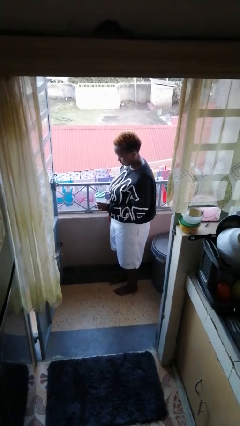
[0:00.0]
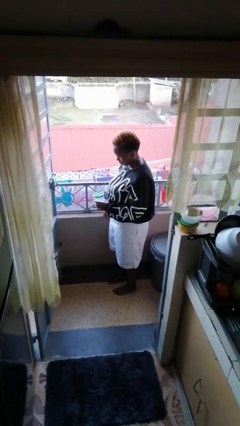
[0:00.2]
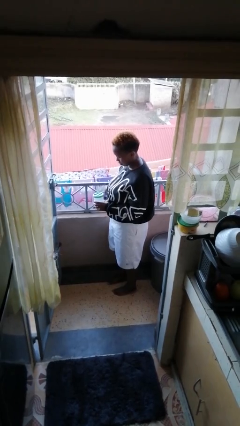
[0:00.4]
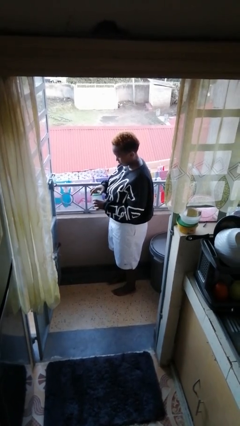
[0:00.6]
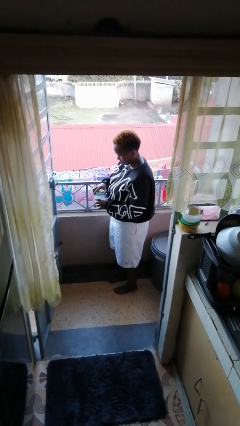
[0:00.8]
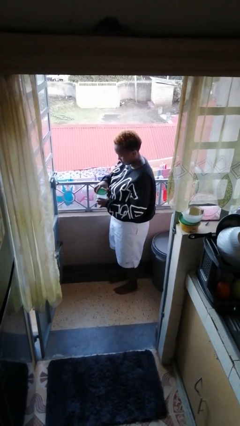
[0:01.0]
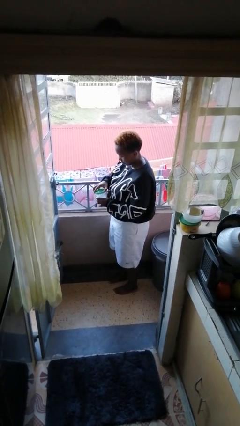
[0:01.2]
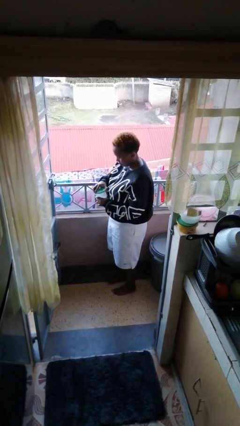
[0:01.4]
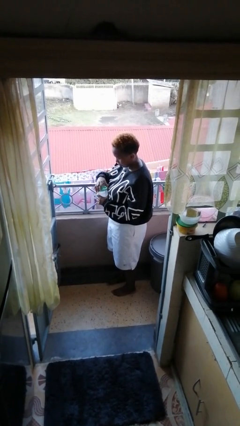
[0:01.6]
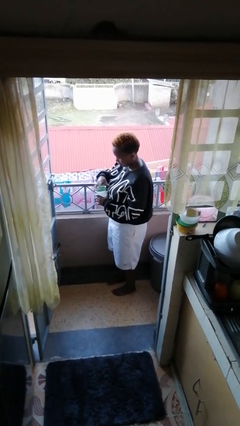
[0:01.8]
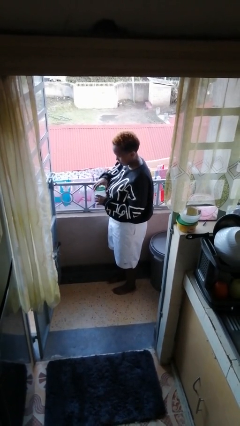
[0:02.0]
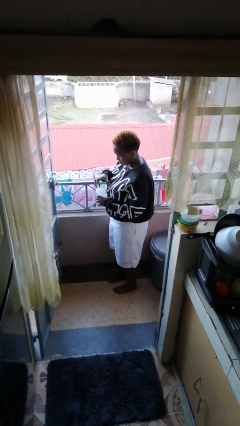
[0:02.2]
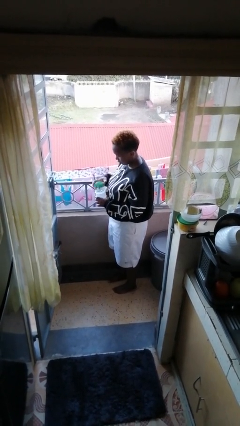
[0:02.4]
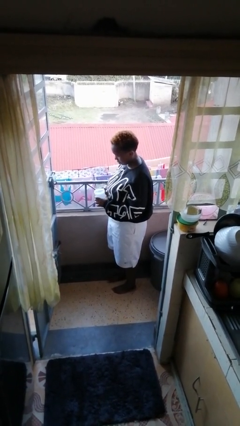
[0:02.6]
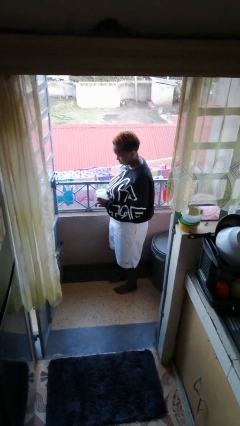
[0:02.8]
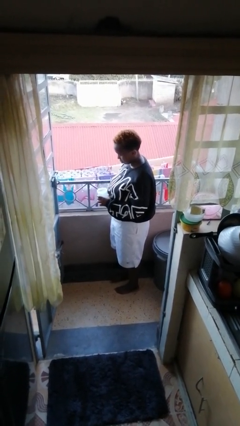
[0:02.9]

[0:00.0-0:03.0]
person opens jar

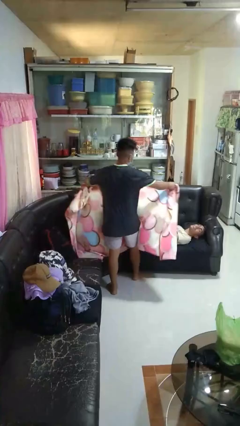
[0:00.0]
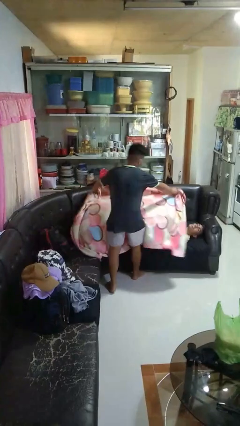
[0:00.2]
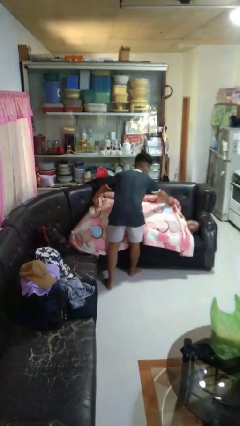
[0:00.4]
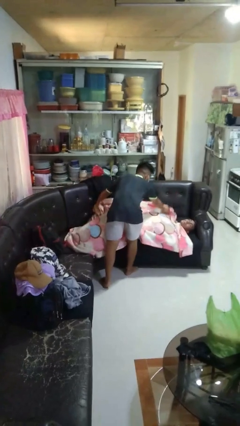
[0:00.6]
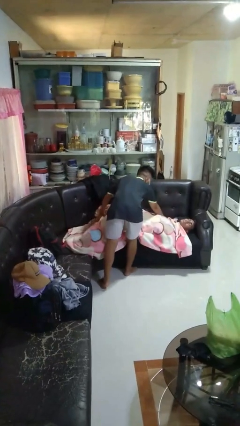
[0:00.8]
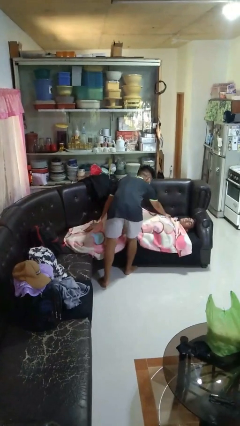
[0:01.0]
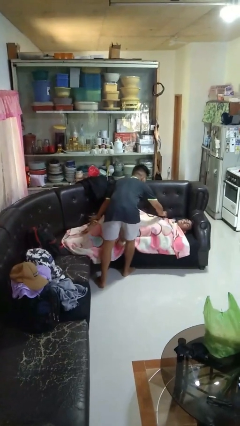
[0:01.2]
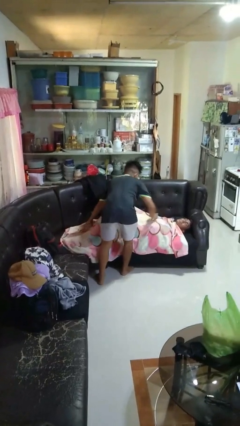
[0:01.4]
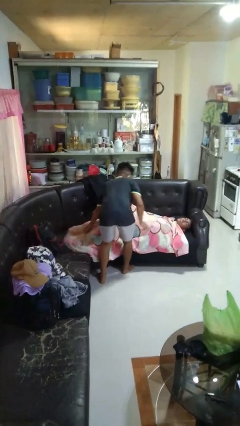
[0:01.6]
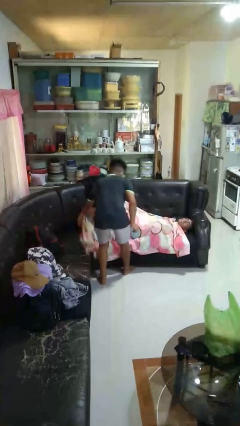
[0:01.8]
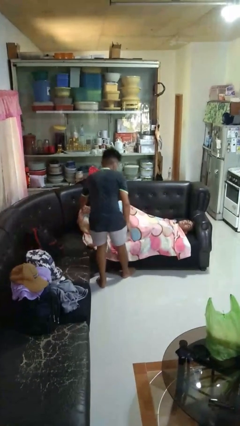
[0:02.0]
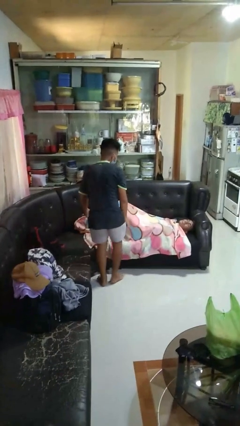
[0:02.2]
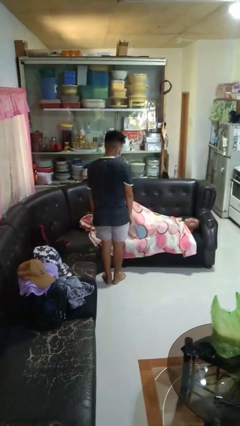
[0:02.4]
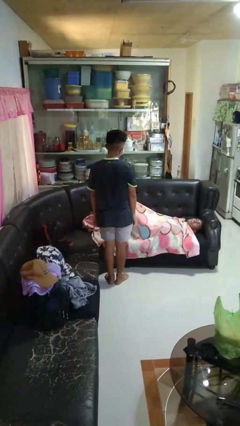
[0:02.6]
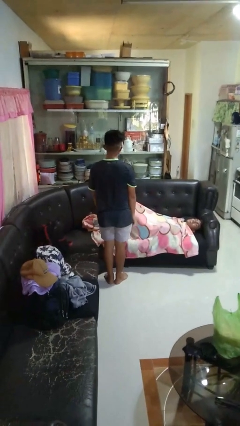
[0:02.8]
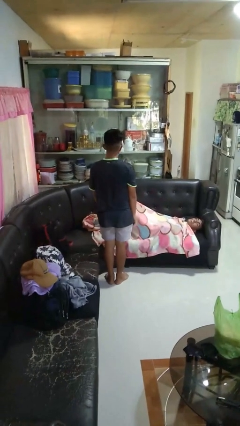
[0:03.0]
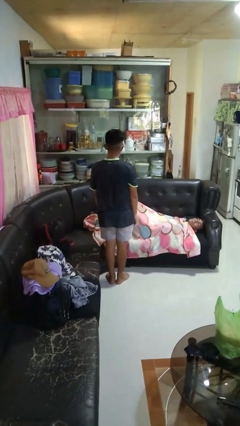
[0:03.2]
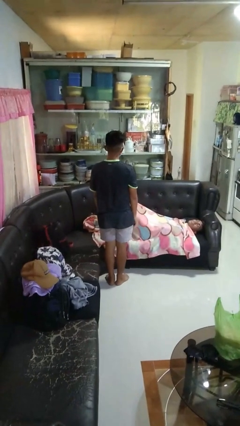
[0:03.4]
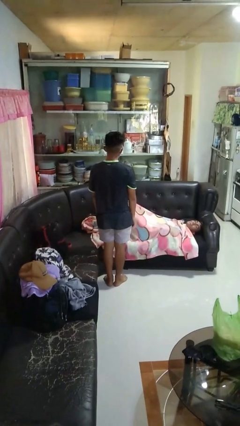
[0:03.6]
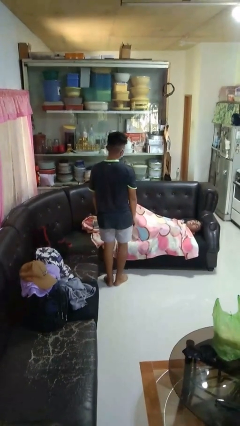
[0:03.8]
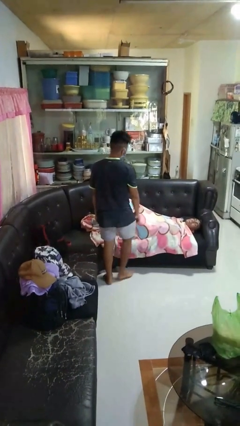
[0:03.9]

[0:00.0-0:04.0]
person covers friend with blanket

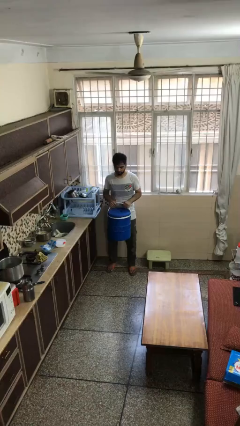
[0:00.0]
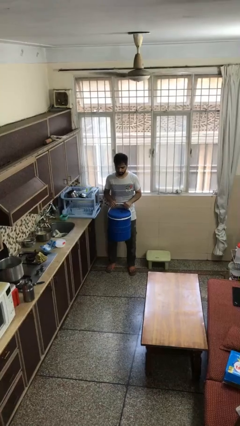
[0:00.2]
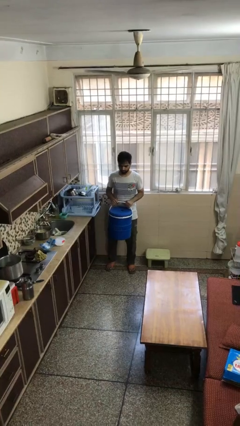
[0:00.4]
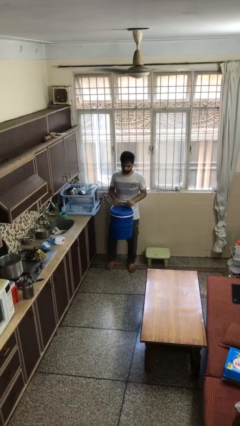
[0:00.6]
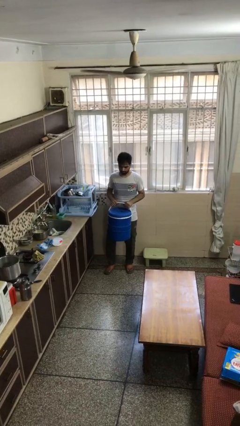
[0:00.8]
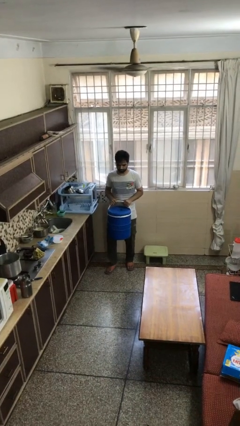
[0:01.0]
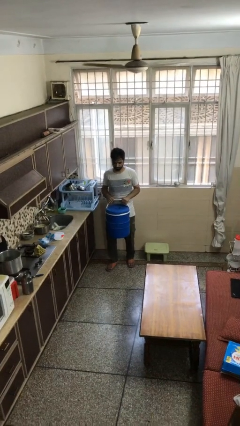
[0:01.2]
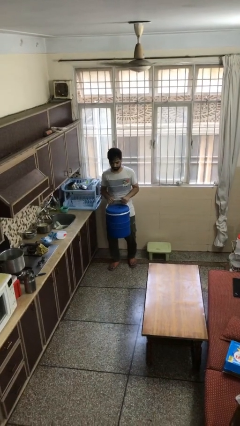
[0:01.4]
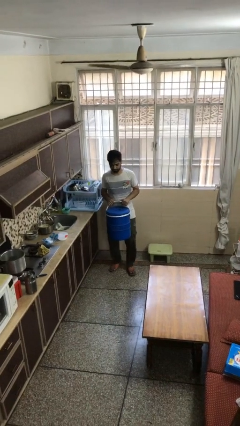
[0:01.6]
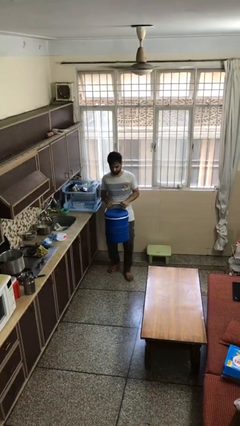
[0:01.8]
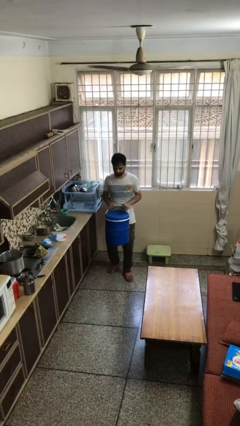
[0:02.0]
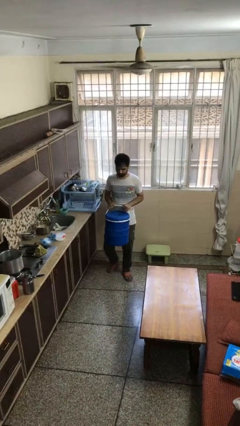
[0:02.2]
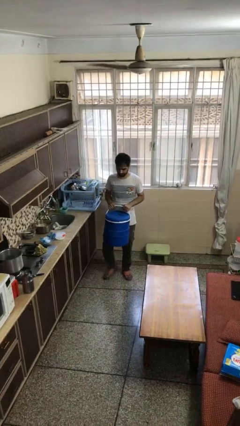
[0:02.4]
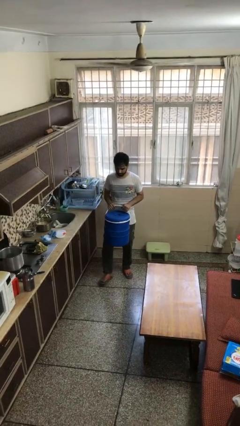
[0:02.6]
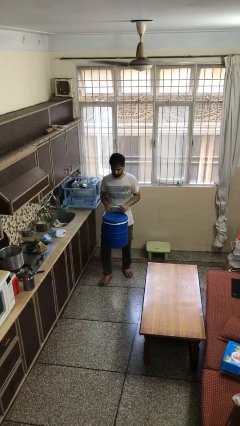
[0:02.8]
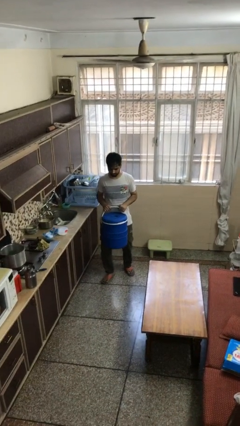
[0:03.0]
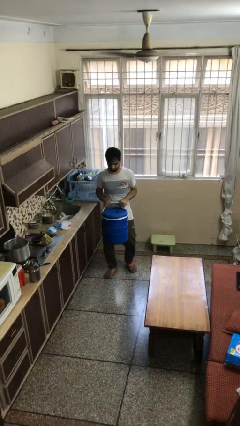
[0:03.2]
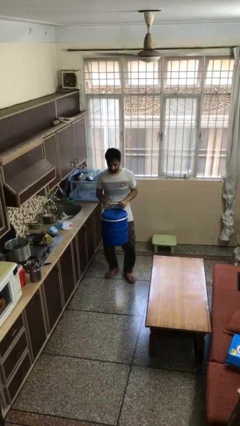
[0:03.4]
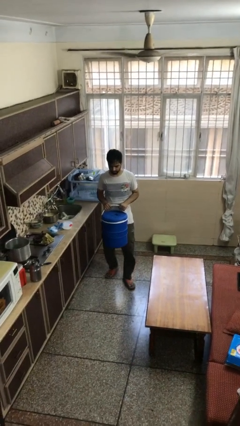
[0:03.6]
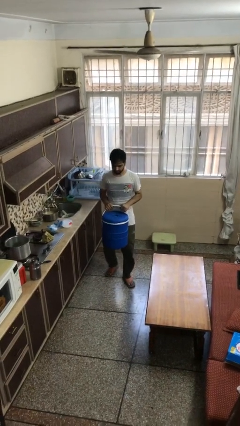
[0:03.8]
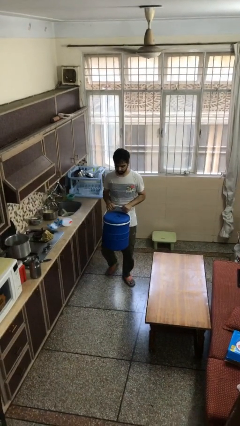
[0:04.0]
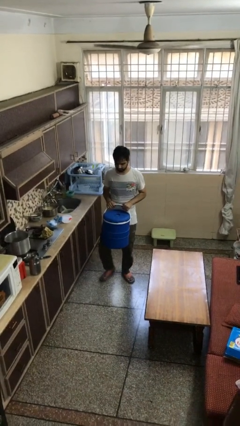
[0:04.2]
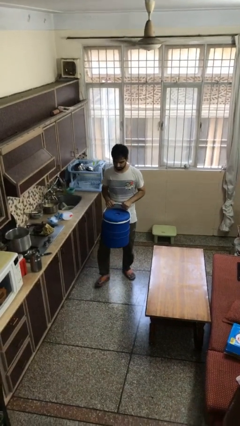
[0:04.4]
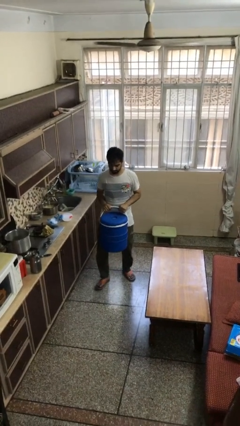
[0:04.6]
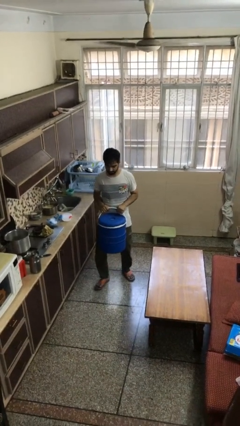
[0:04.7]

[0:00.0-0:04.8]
person carries heavy object

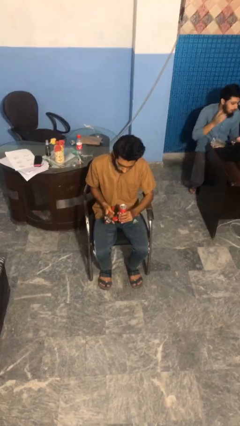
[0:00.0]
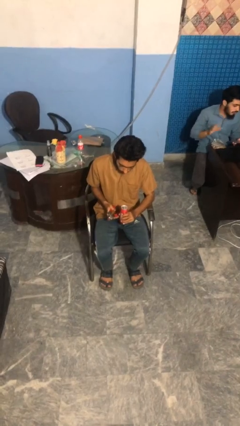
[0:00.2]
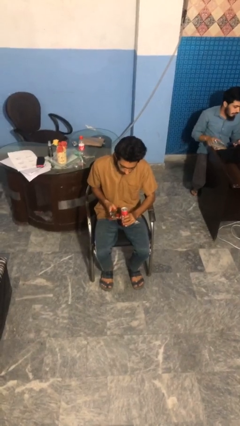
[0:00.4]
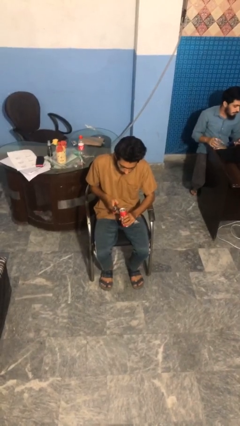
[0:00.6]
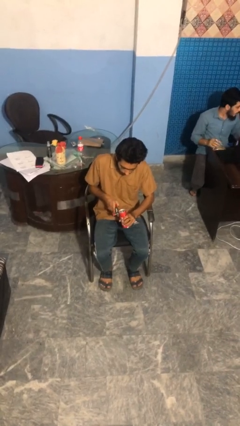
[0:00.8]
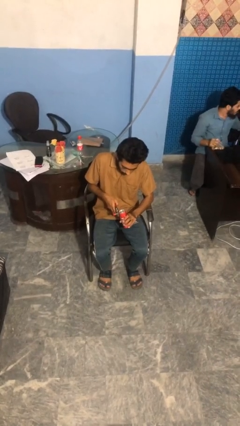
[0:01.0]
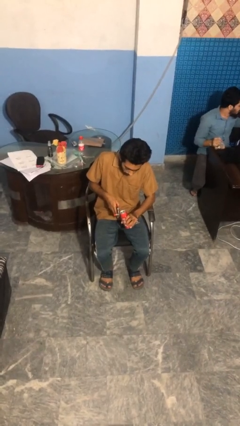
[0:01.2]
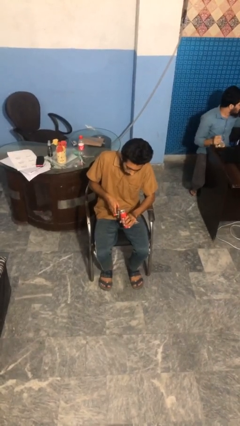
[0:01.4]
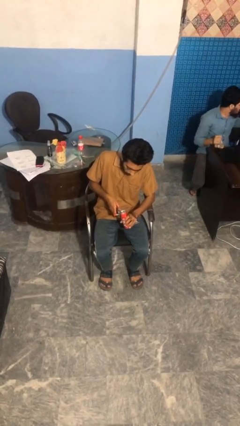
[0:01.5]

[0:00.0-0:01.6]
person opens can with can opener

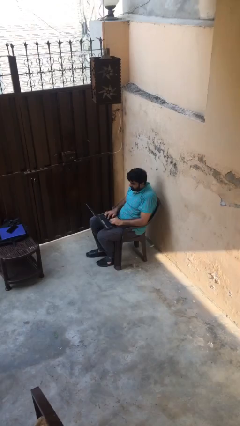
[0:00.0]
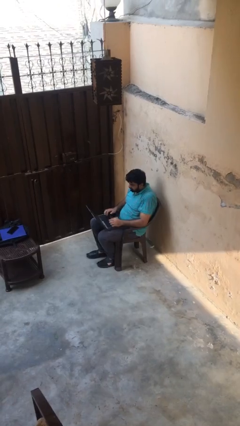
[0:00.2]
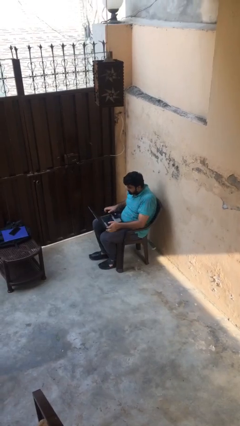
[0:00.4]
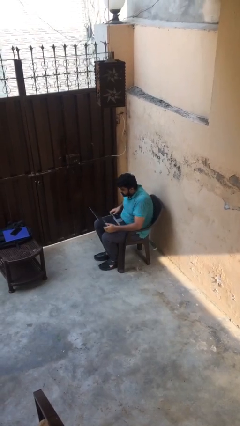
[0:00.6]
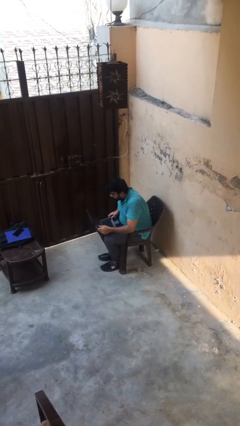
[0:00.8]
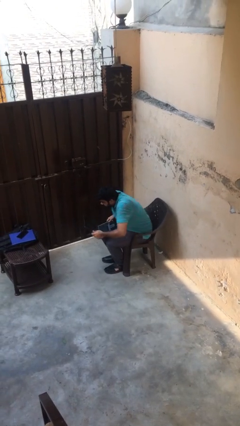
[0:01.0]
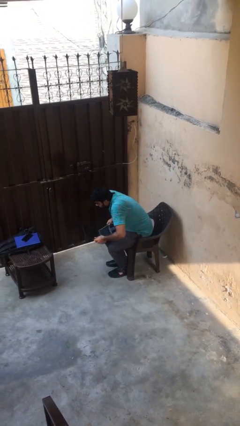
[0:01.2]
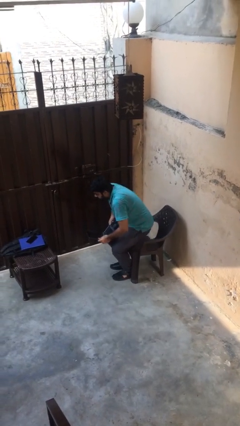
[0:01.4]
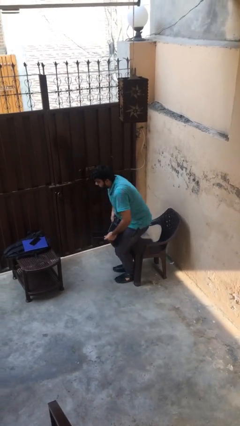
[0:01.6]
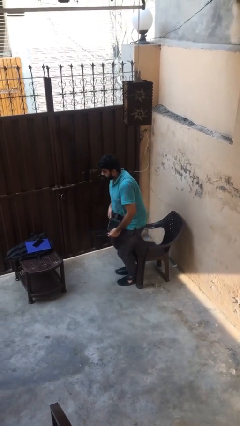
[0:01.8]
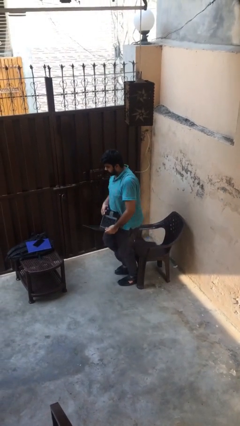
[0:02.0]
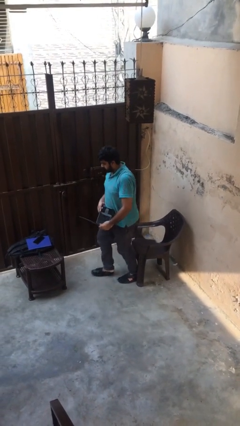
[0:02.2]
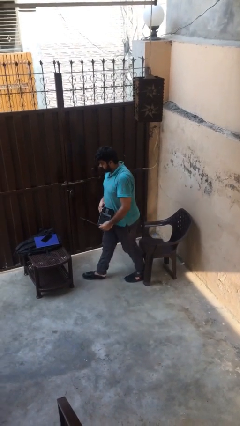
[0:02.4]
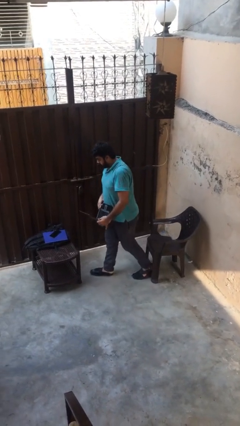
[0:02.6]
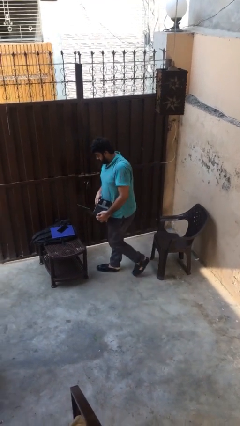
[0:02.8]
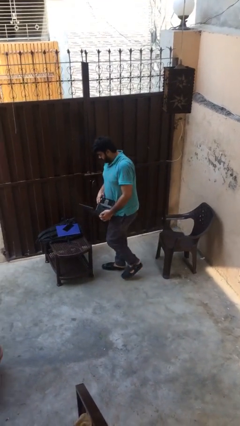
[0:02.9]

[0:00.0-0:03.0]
person stands up

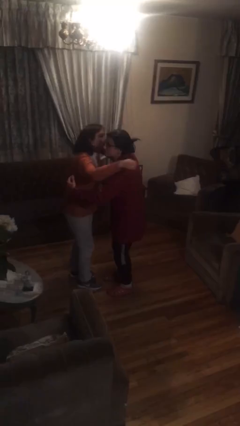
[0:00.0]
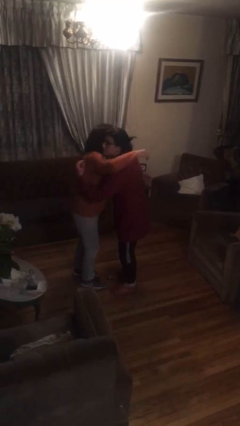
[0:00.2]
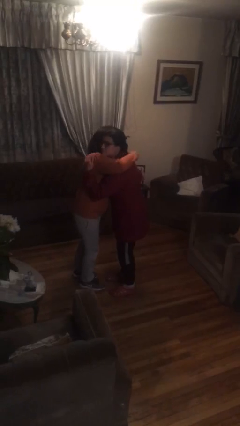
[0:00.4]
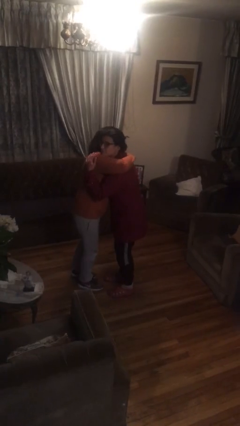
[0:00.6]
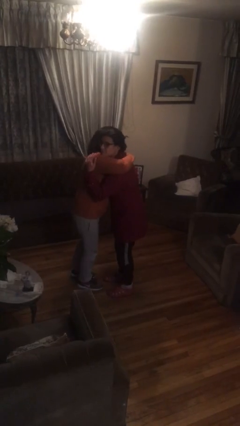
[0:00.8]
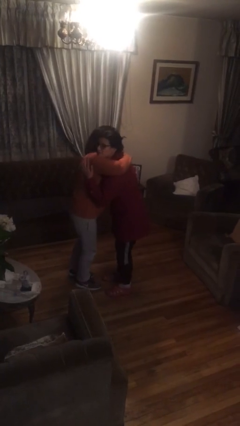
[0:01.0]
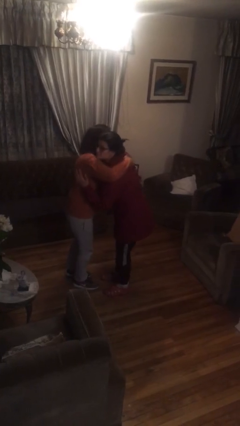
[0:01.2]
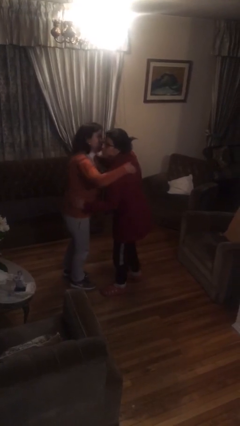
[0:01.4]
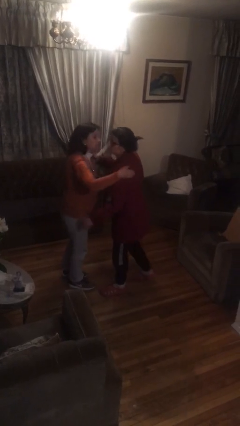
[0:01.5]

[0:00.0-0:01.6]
person embraces person
